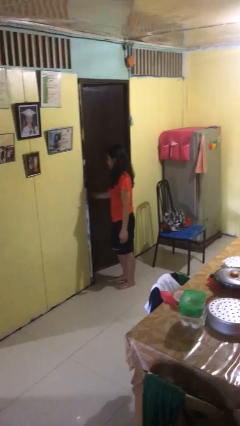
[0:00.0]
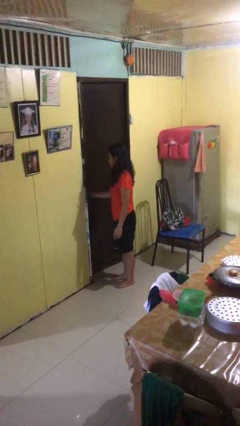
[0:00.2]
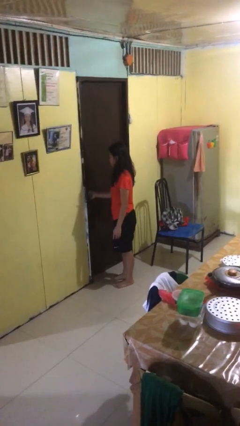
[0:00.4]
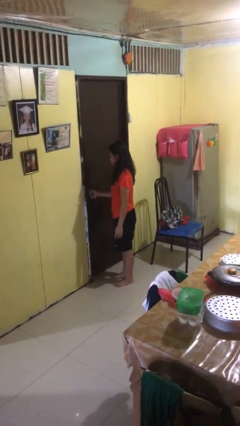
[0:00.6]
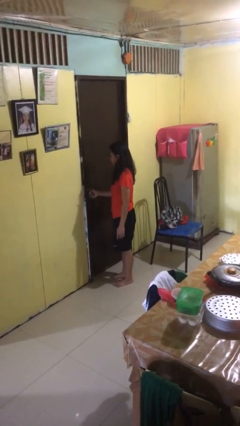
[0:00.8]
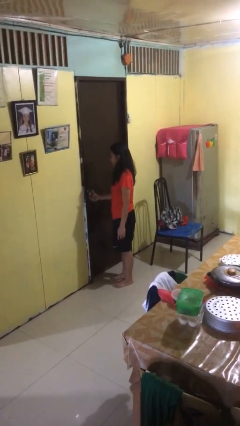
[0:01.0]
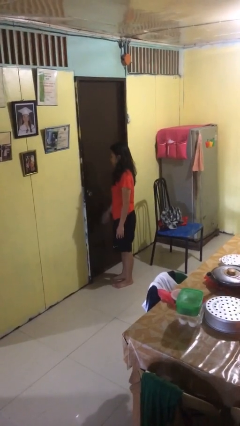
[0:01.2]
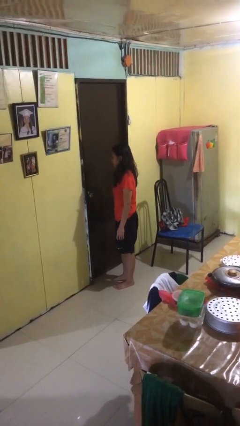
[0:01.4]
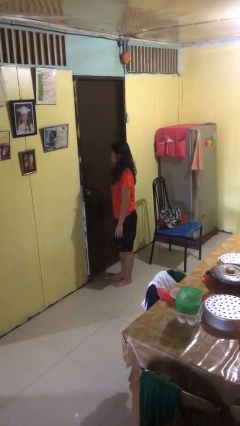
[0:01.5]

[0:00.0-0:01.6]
person closes facility door

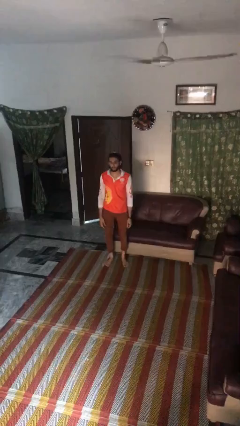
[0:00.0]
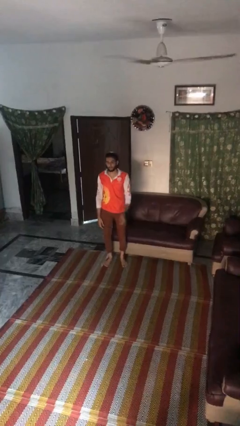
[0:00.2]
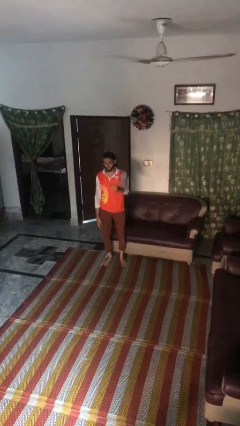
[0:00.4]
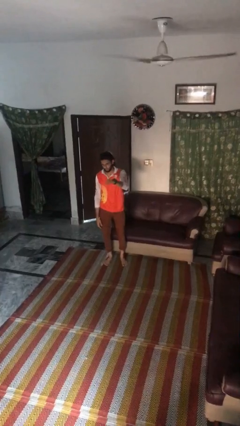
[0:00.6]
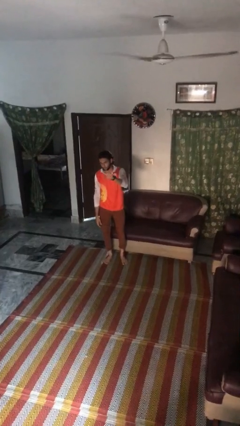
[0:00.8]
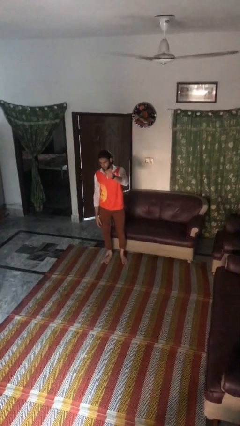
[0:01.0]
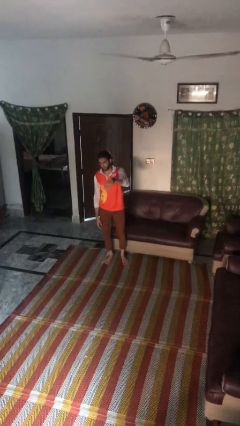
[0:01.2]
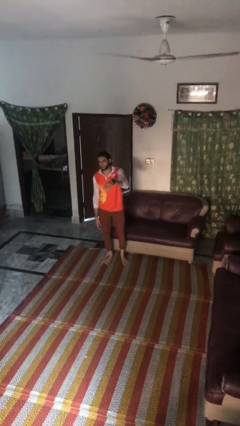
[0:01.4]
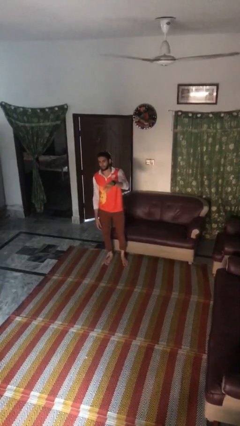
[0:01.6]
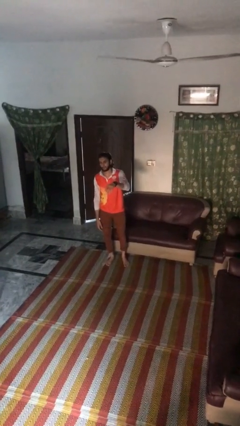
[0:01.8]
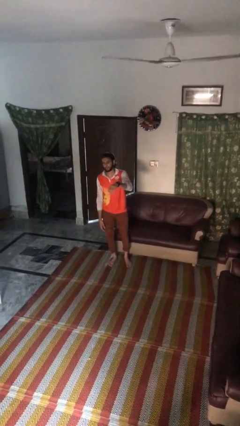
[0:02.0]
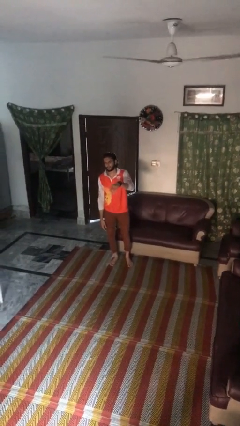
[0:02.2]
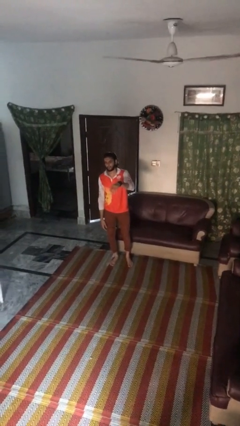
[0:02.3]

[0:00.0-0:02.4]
person gestures come here

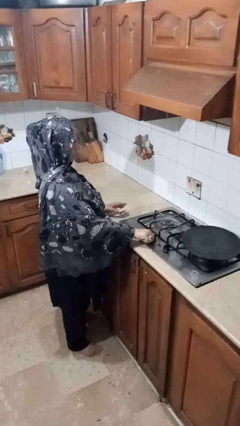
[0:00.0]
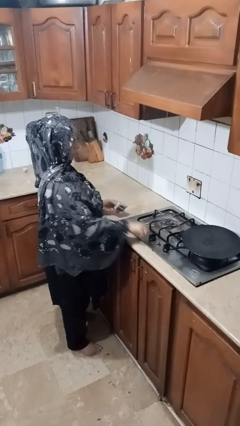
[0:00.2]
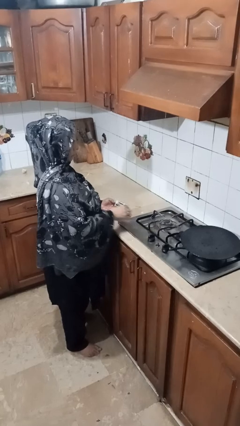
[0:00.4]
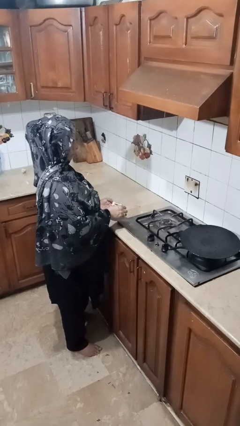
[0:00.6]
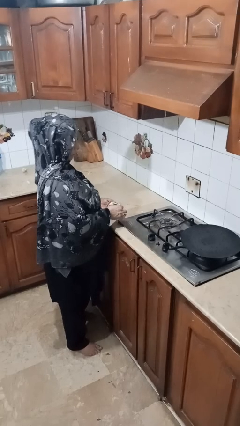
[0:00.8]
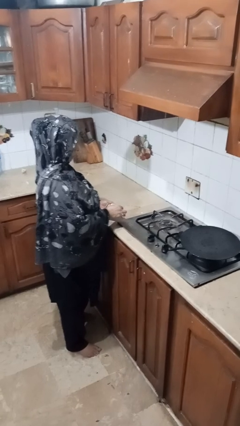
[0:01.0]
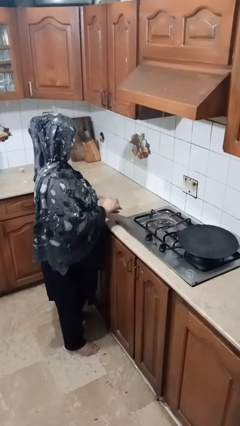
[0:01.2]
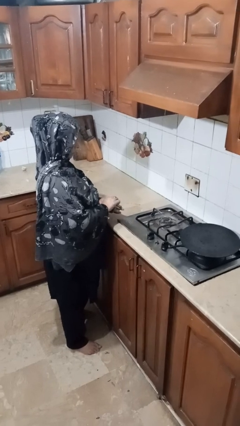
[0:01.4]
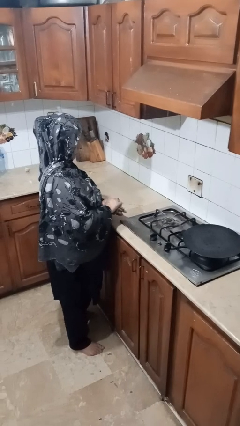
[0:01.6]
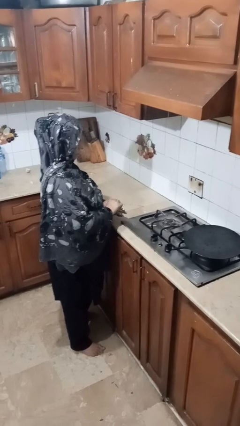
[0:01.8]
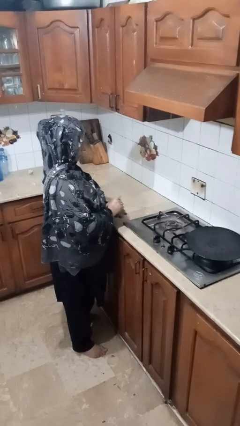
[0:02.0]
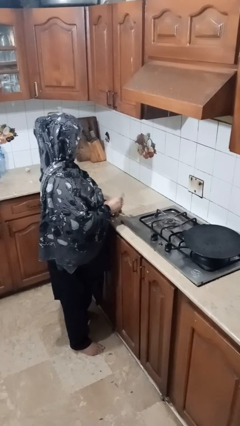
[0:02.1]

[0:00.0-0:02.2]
person turns off stovetop

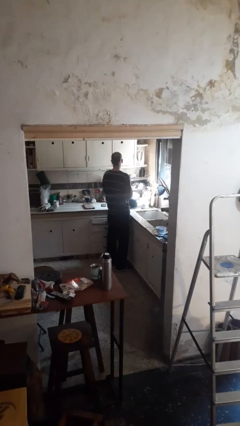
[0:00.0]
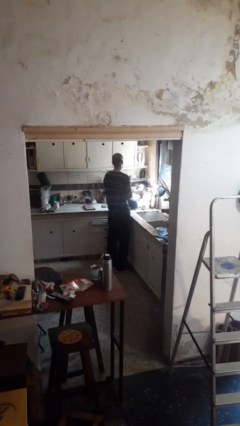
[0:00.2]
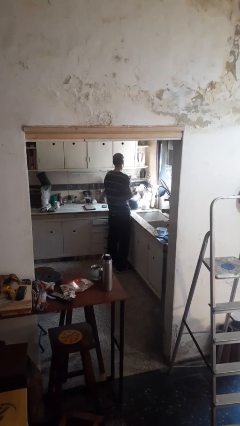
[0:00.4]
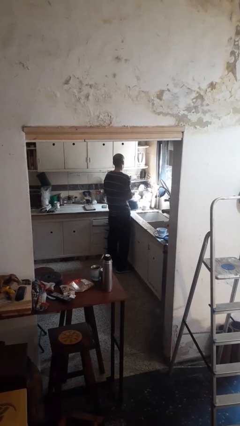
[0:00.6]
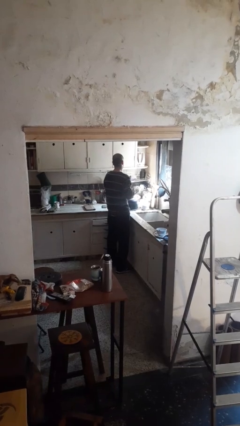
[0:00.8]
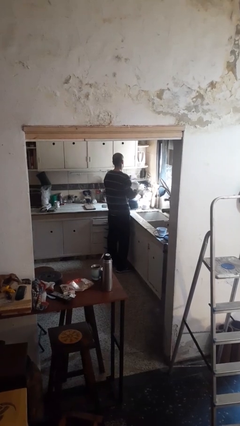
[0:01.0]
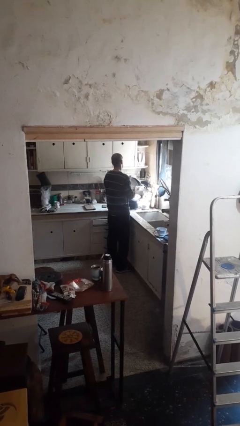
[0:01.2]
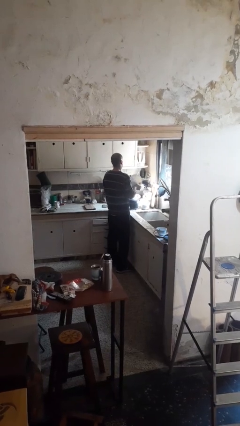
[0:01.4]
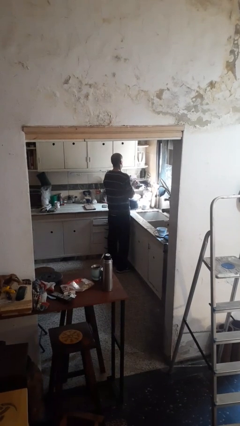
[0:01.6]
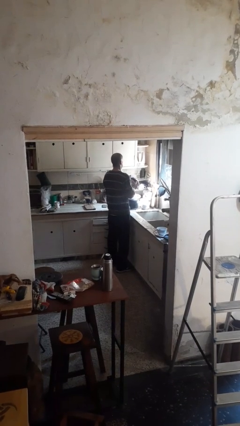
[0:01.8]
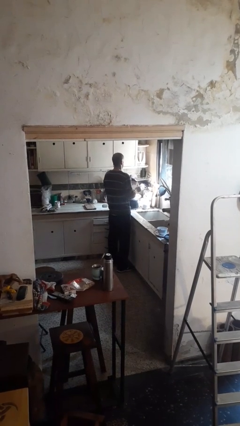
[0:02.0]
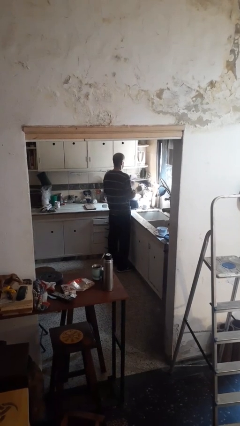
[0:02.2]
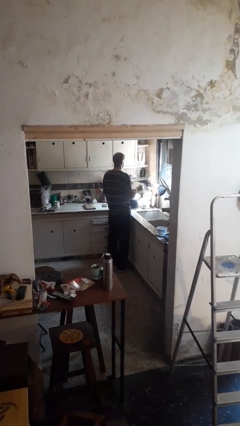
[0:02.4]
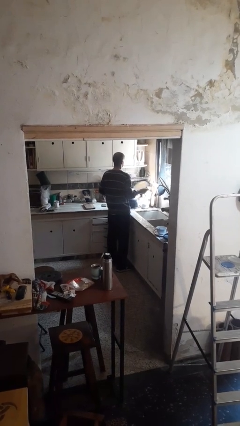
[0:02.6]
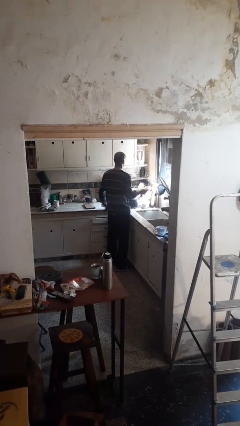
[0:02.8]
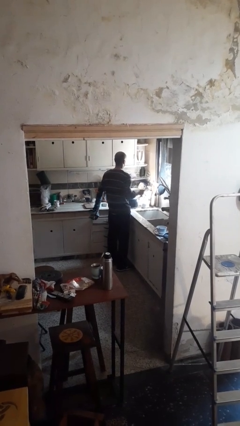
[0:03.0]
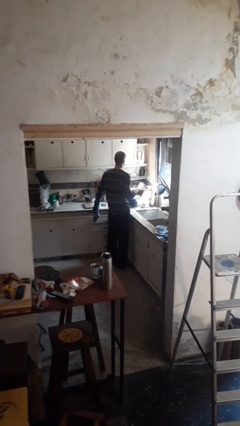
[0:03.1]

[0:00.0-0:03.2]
person dries dish

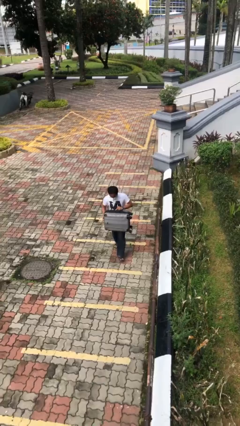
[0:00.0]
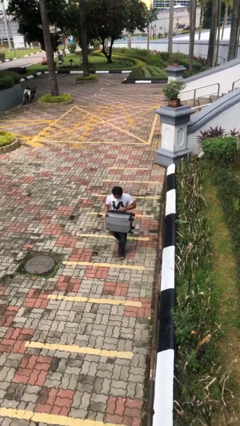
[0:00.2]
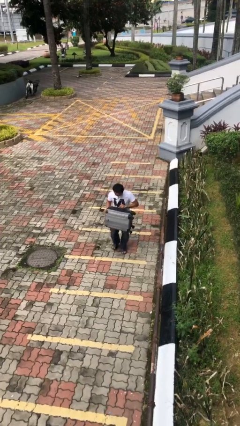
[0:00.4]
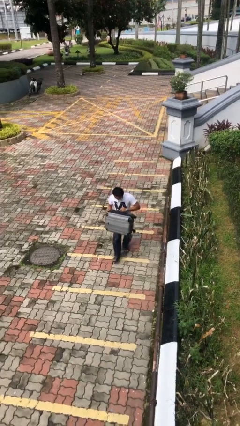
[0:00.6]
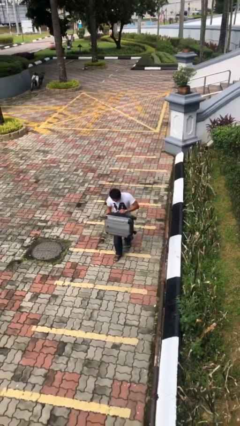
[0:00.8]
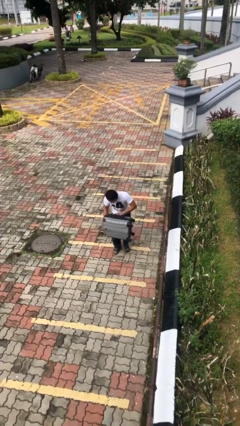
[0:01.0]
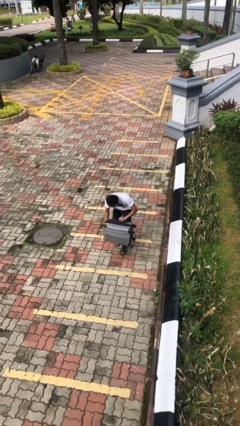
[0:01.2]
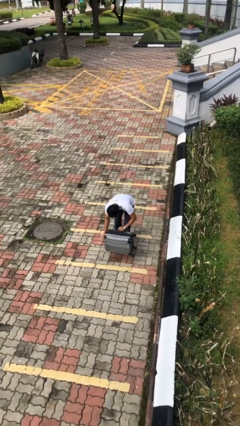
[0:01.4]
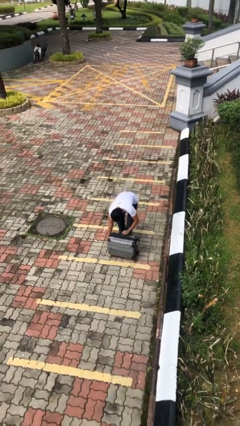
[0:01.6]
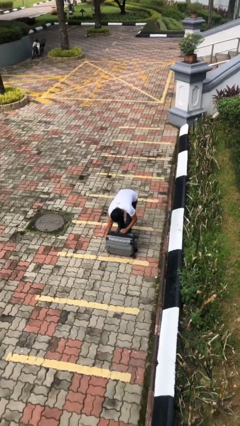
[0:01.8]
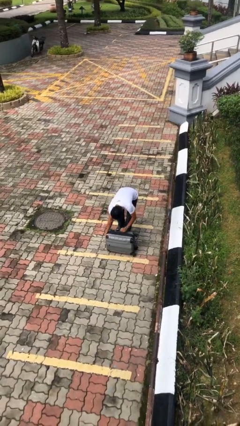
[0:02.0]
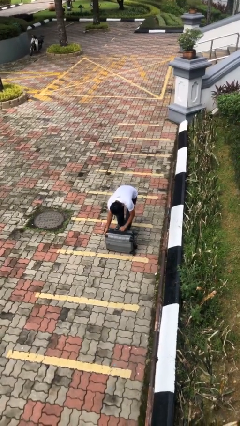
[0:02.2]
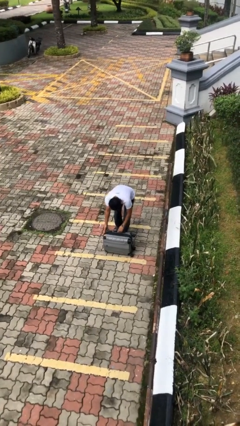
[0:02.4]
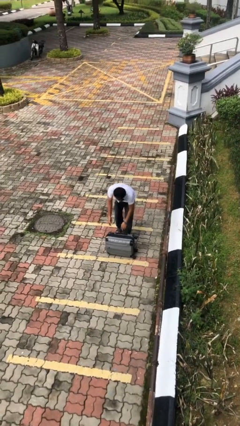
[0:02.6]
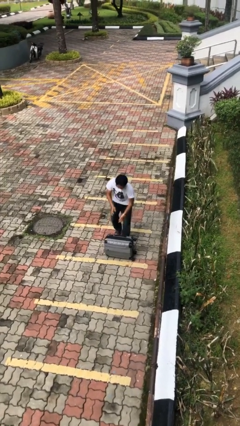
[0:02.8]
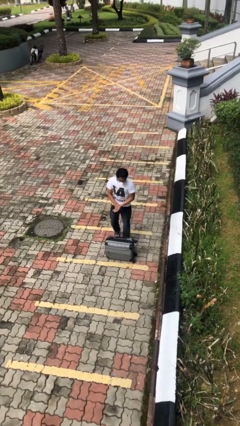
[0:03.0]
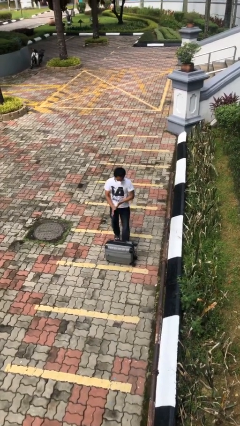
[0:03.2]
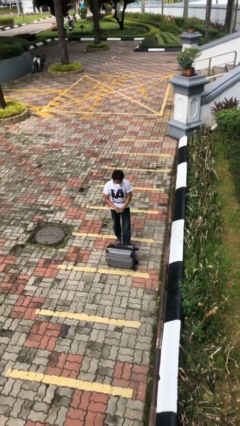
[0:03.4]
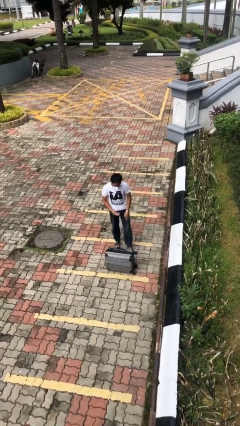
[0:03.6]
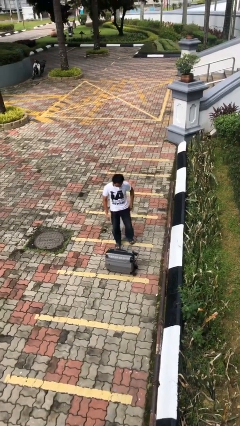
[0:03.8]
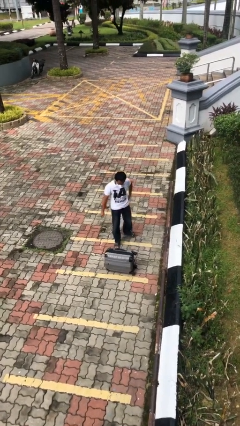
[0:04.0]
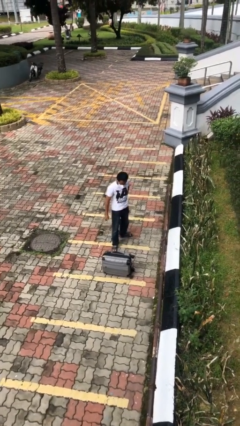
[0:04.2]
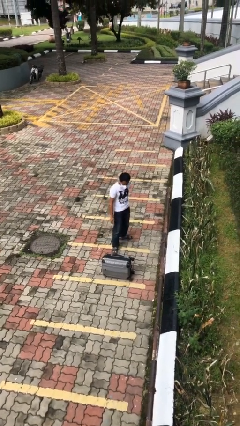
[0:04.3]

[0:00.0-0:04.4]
person puts down object on floor

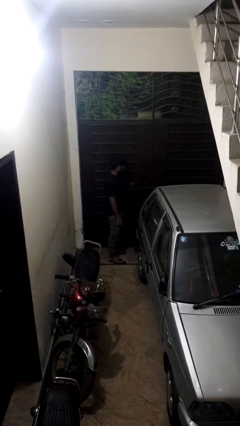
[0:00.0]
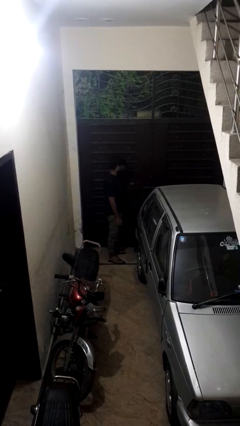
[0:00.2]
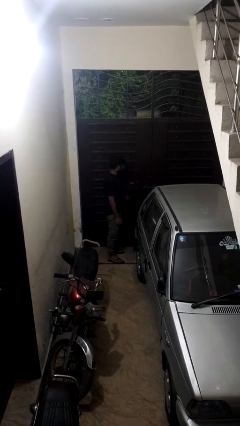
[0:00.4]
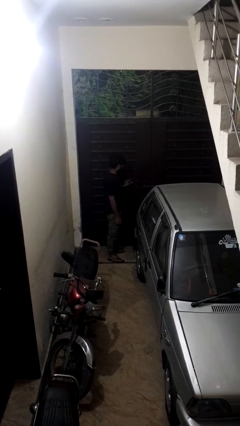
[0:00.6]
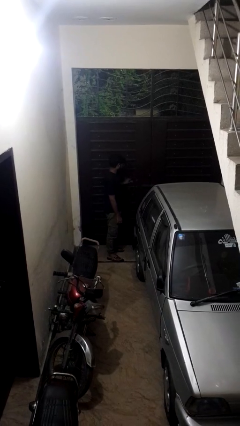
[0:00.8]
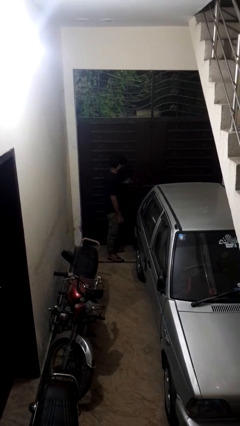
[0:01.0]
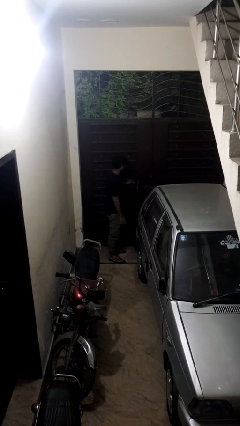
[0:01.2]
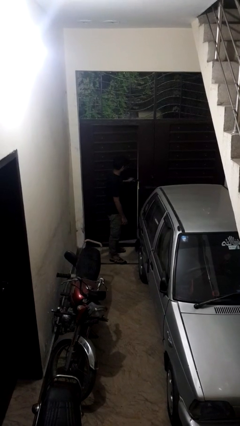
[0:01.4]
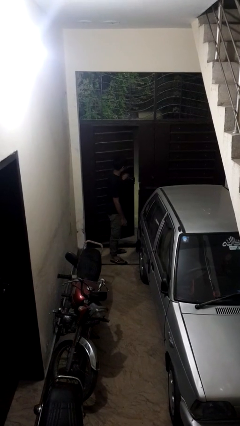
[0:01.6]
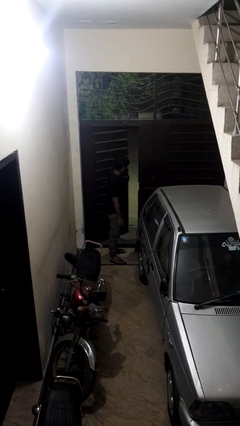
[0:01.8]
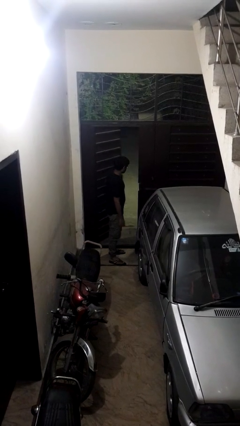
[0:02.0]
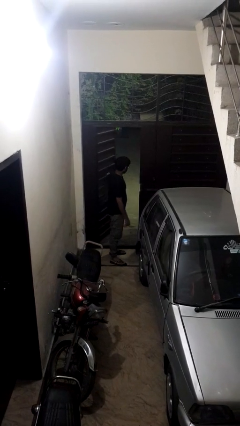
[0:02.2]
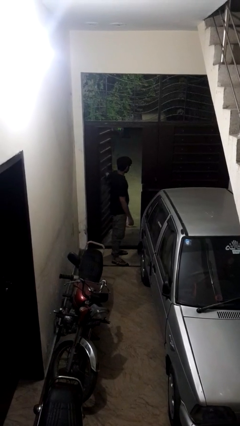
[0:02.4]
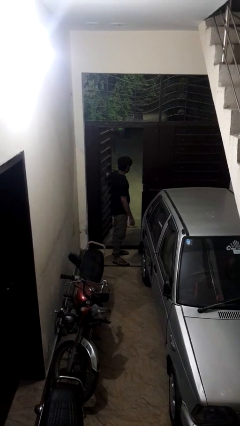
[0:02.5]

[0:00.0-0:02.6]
person opens gate

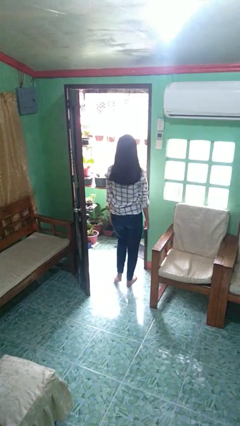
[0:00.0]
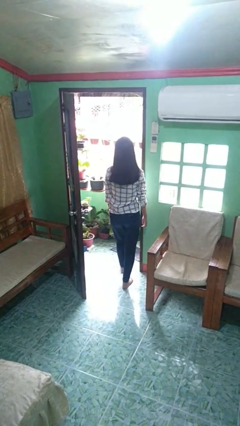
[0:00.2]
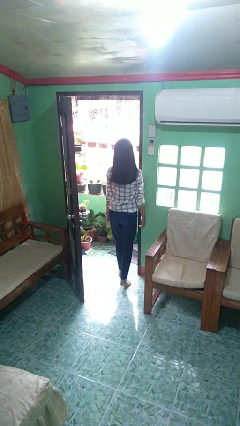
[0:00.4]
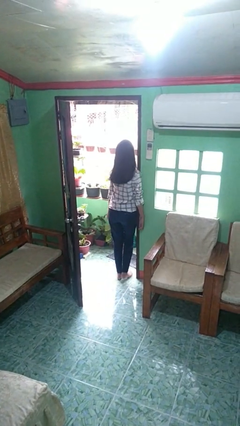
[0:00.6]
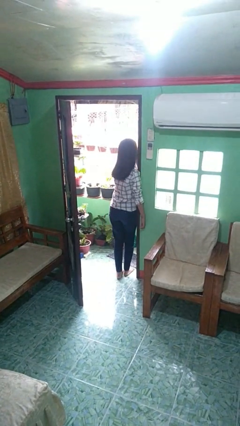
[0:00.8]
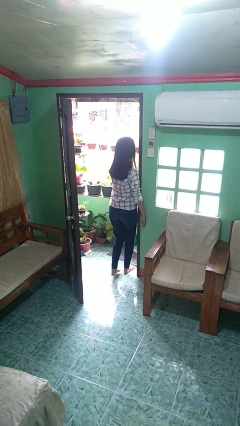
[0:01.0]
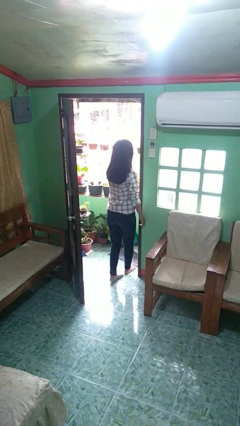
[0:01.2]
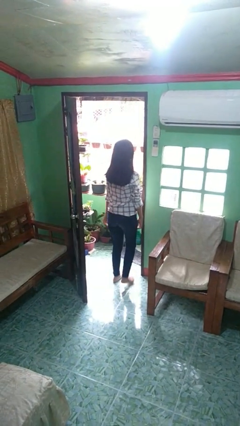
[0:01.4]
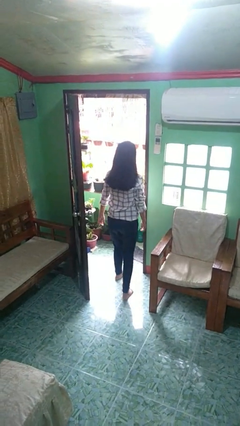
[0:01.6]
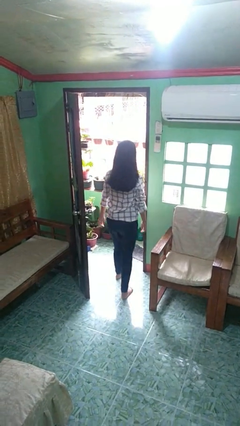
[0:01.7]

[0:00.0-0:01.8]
person bumps into wall
